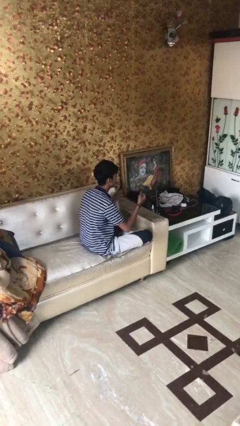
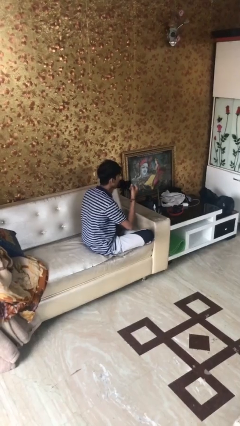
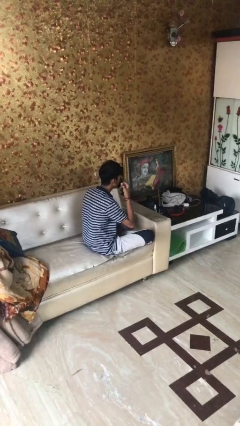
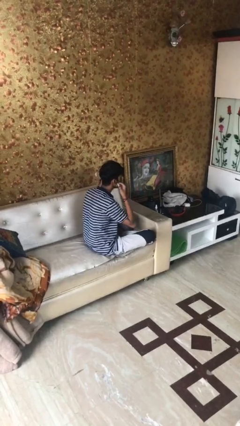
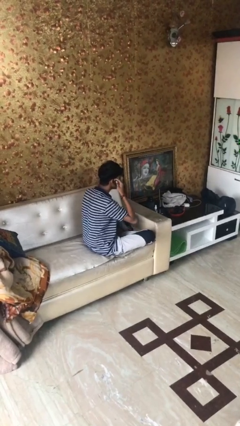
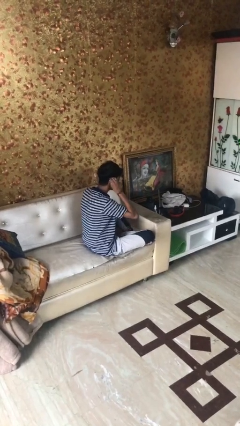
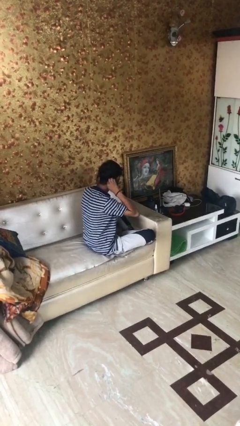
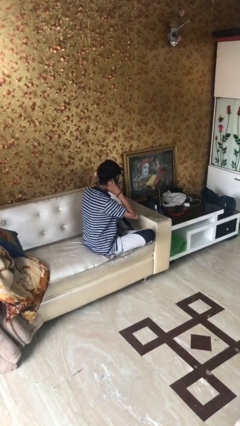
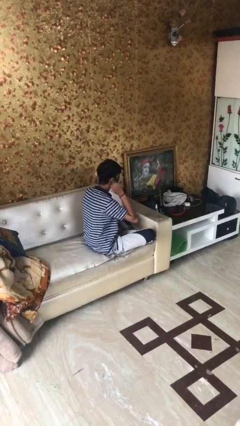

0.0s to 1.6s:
person puts on facemask

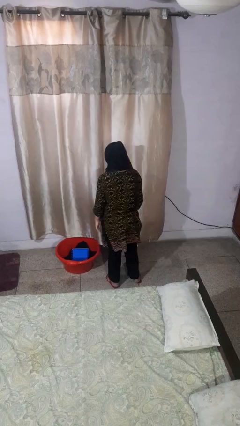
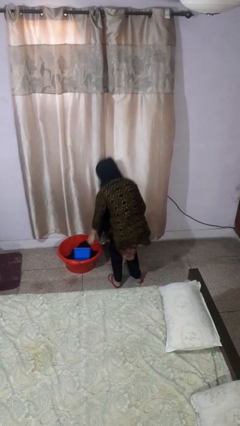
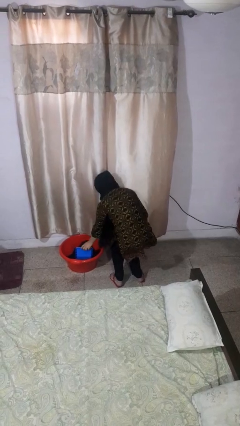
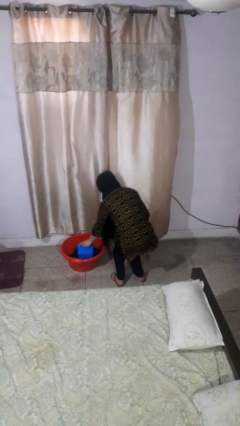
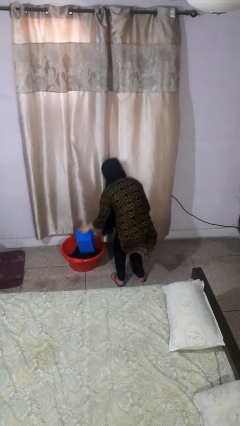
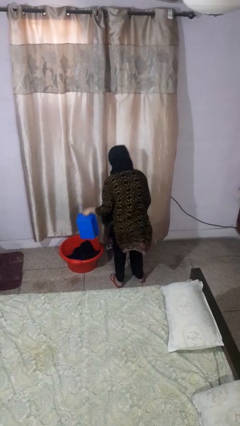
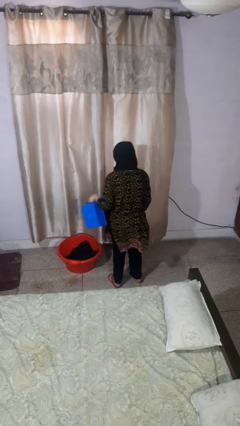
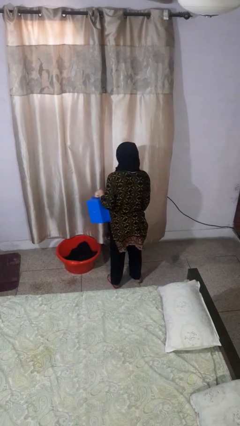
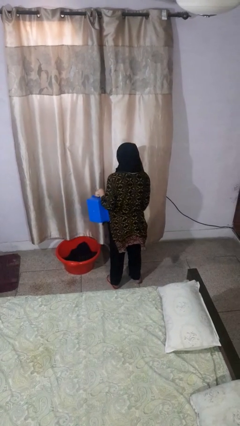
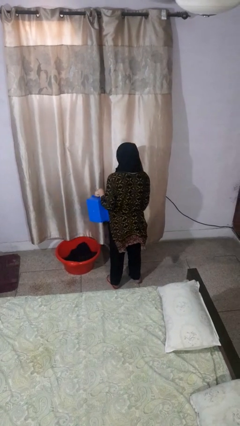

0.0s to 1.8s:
person takes object from basket
